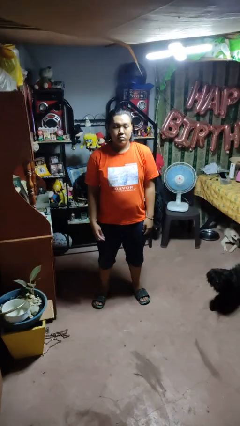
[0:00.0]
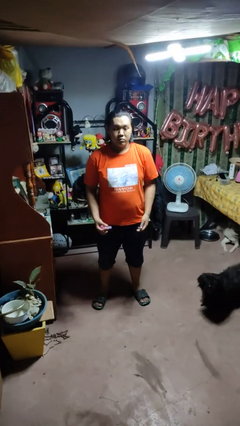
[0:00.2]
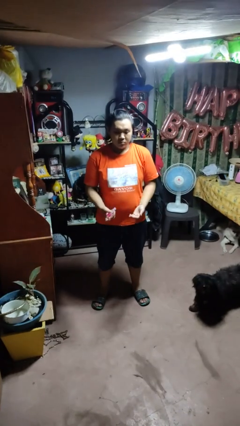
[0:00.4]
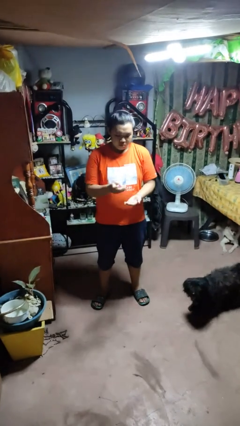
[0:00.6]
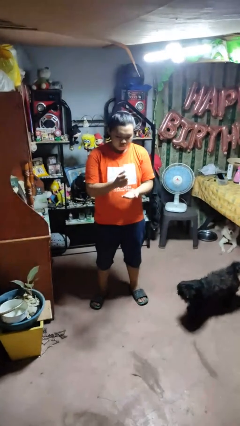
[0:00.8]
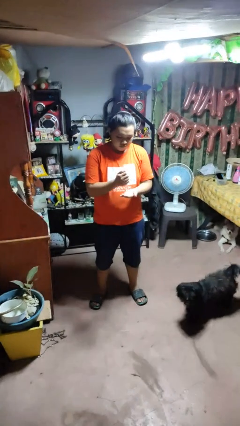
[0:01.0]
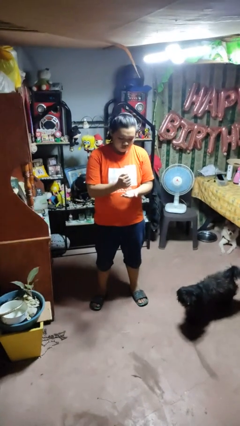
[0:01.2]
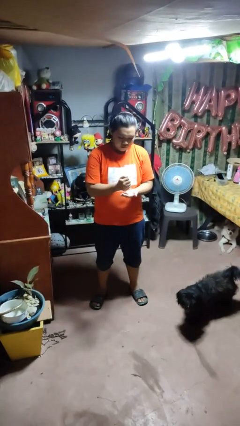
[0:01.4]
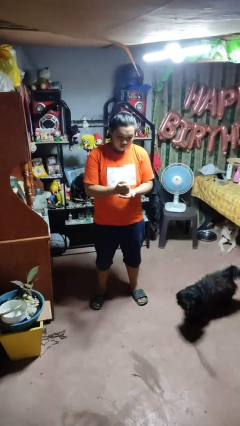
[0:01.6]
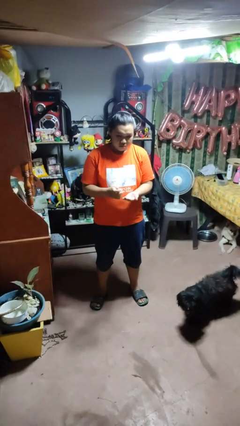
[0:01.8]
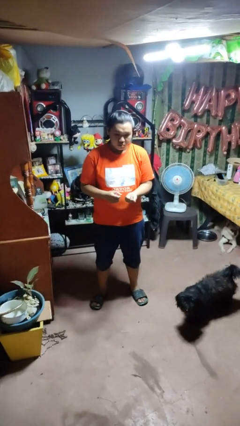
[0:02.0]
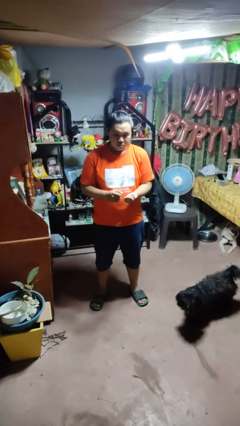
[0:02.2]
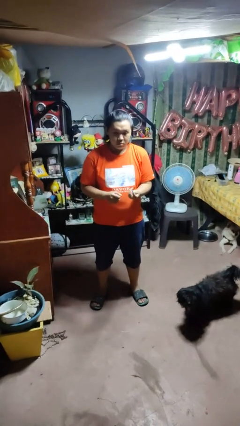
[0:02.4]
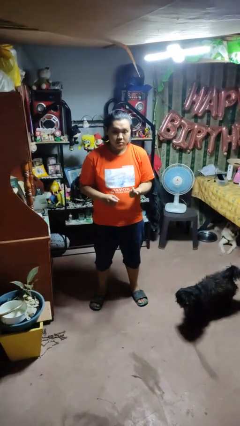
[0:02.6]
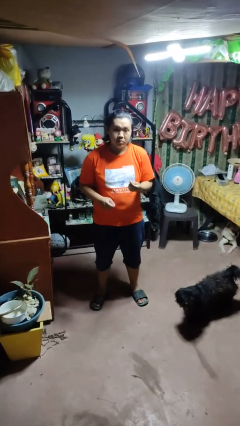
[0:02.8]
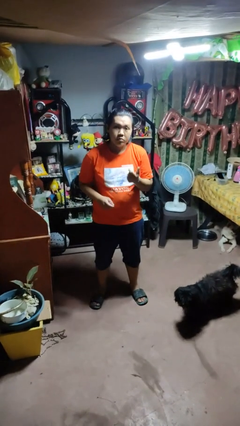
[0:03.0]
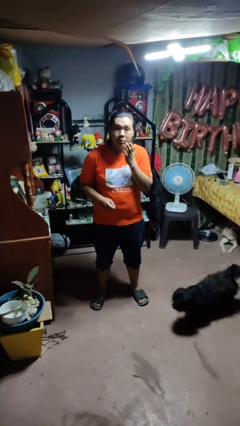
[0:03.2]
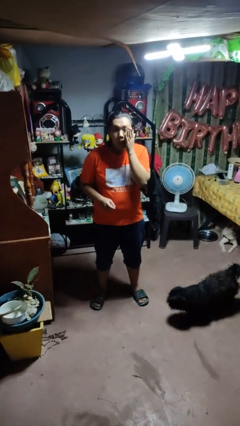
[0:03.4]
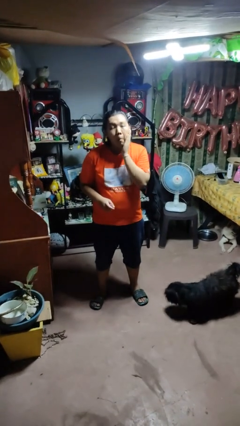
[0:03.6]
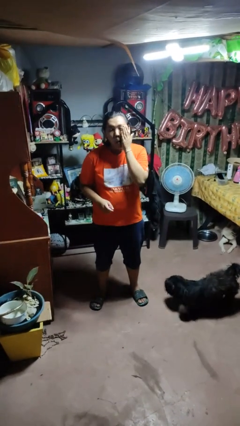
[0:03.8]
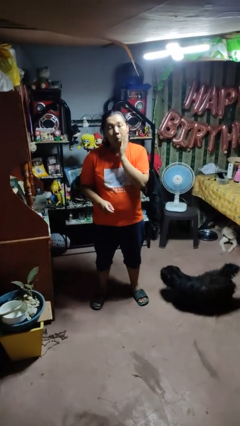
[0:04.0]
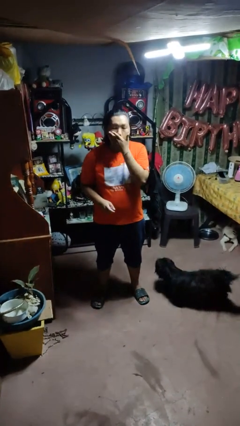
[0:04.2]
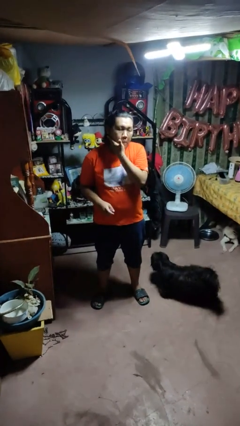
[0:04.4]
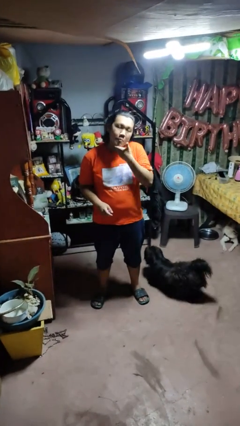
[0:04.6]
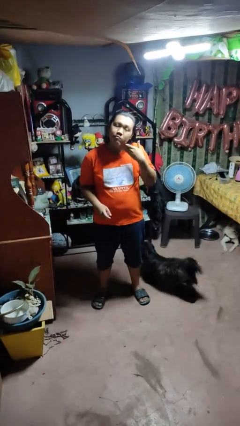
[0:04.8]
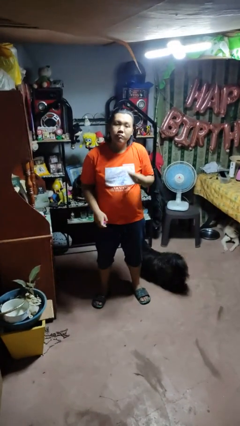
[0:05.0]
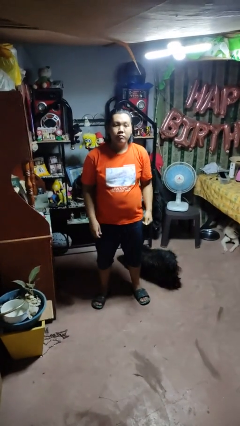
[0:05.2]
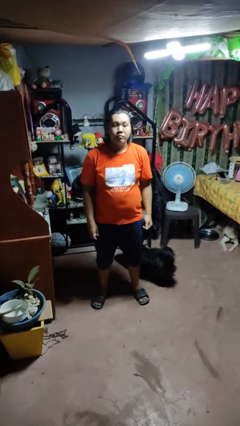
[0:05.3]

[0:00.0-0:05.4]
person applies facial moisturizer

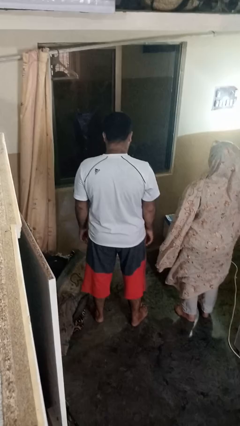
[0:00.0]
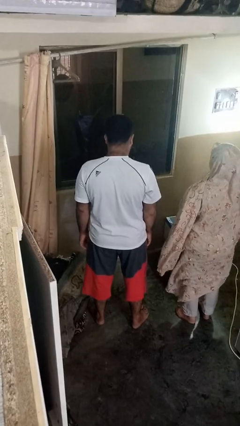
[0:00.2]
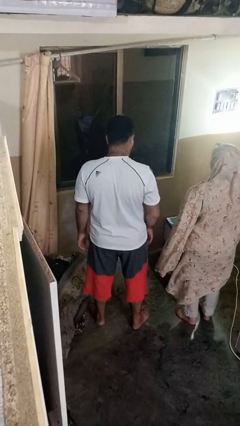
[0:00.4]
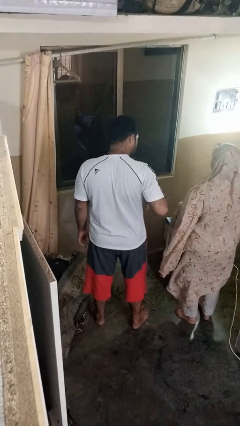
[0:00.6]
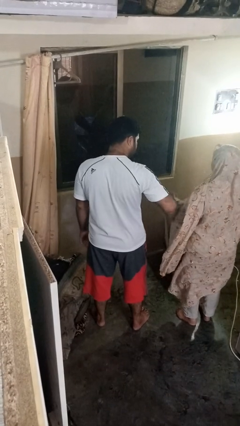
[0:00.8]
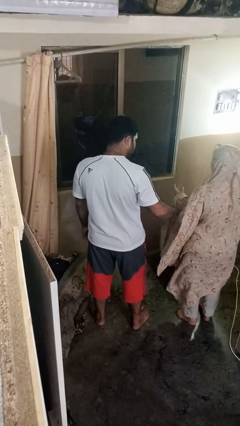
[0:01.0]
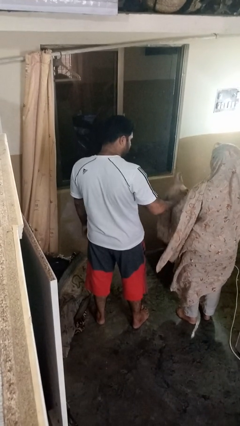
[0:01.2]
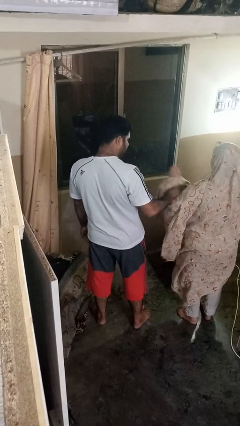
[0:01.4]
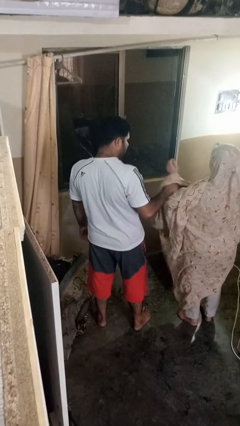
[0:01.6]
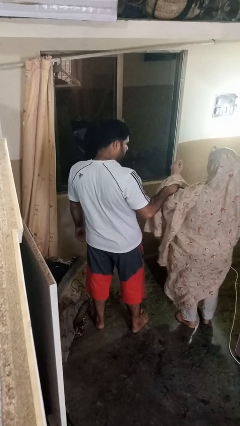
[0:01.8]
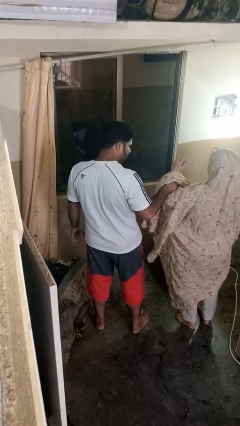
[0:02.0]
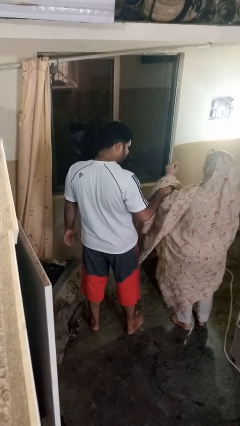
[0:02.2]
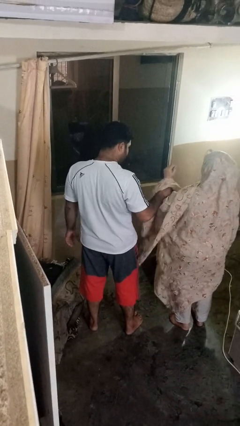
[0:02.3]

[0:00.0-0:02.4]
person grabs person by forearm

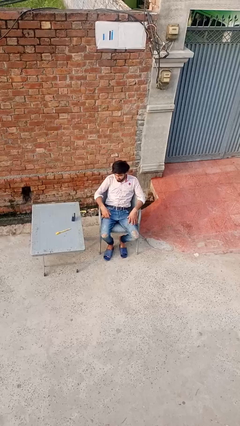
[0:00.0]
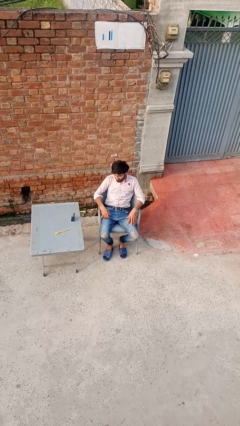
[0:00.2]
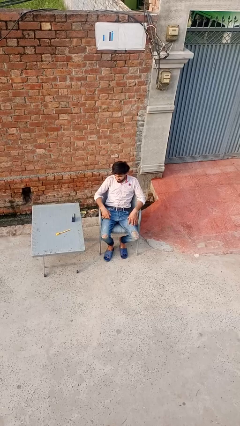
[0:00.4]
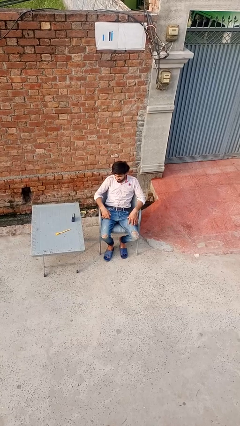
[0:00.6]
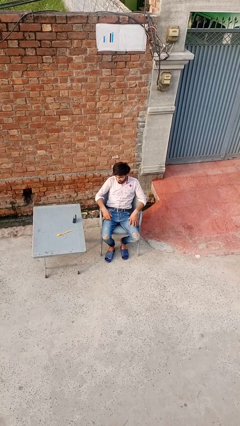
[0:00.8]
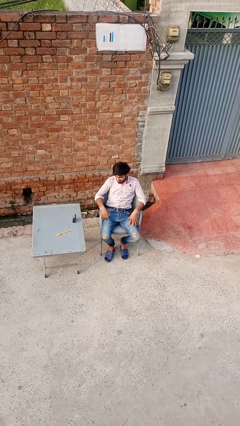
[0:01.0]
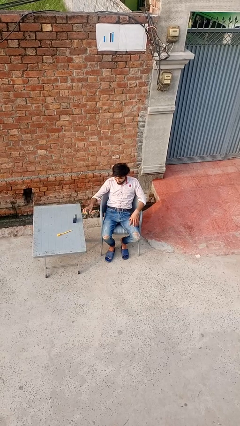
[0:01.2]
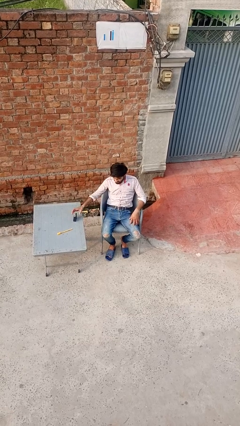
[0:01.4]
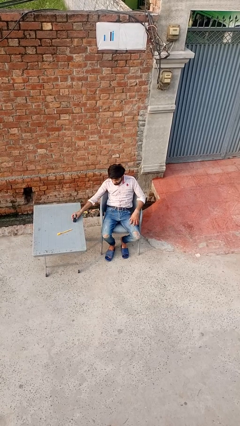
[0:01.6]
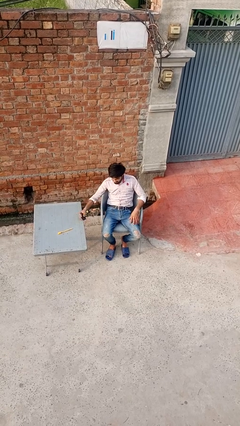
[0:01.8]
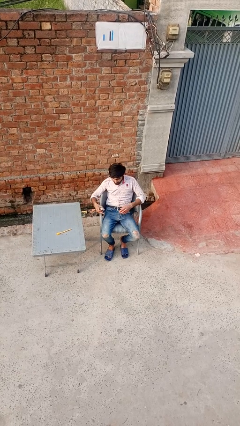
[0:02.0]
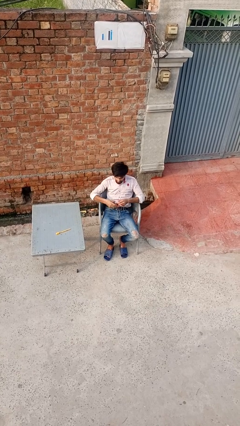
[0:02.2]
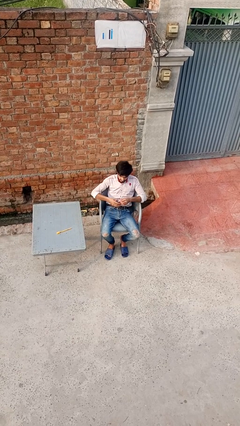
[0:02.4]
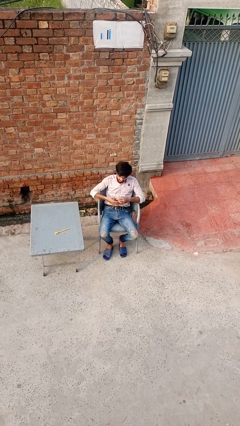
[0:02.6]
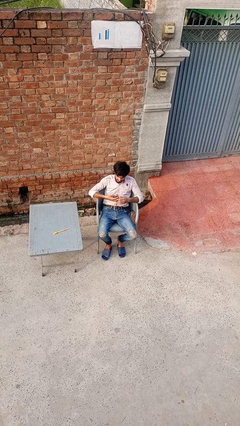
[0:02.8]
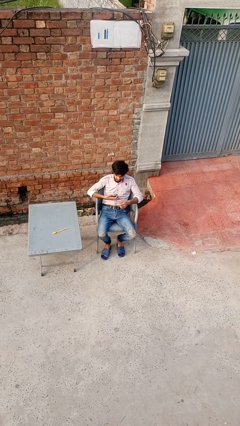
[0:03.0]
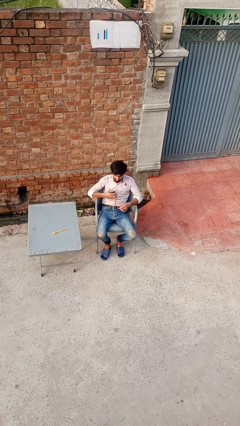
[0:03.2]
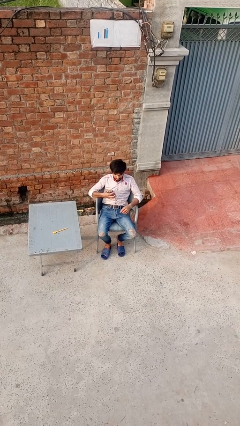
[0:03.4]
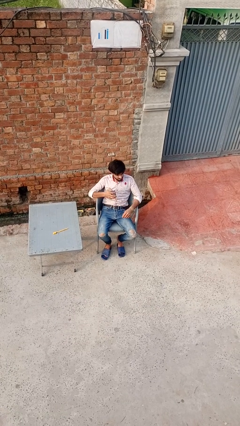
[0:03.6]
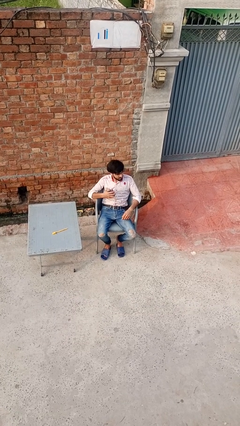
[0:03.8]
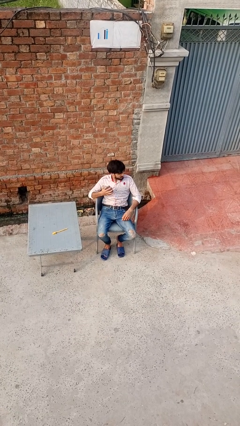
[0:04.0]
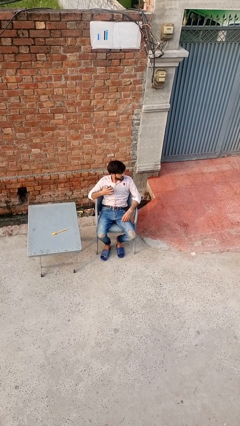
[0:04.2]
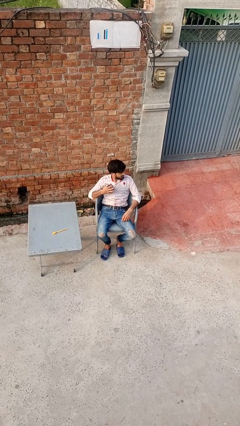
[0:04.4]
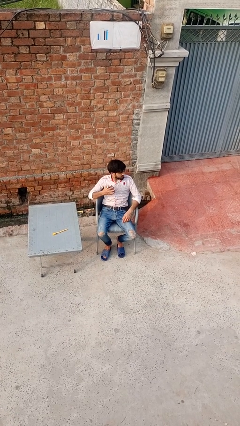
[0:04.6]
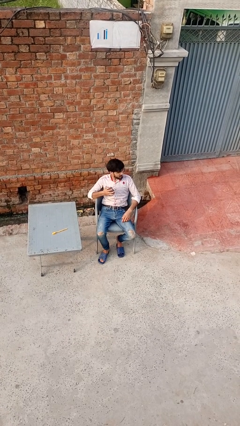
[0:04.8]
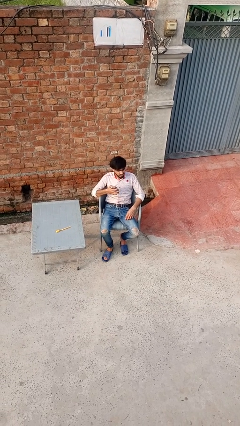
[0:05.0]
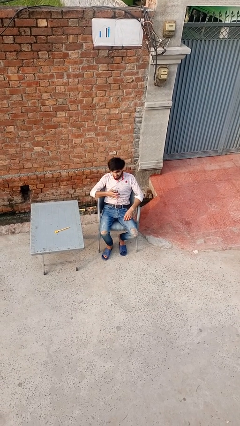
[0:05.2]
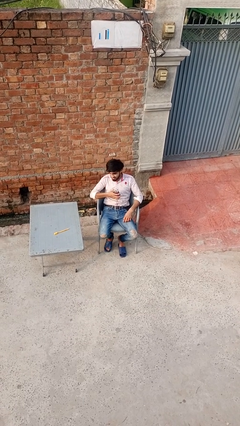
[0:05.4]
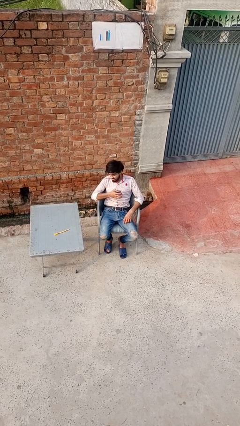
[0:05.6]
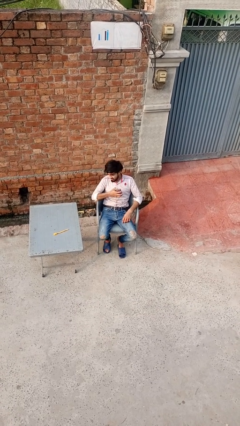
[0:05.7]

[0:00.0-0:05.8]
person applies deodorant

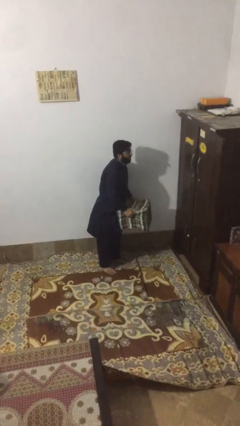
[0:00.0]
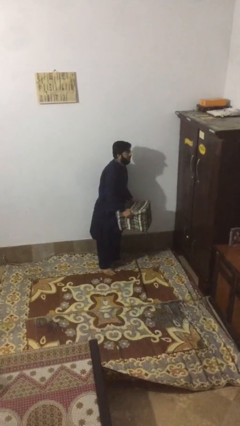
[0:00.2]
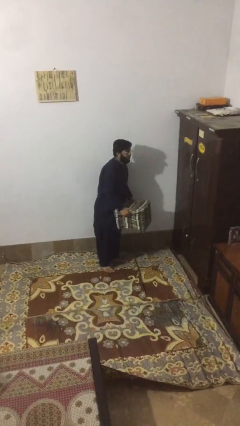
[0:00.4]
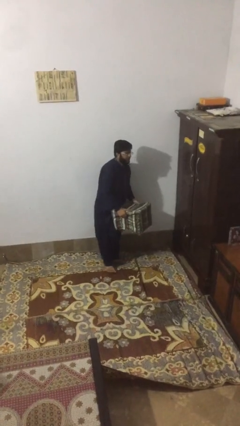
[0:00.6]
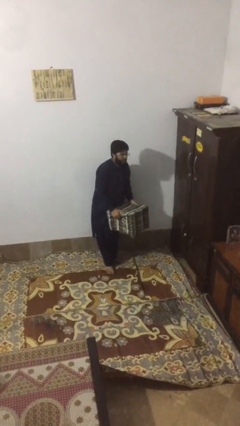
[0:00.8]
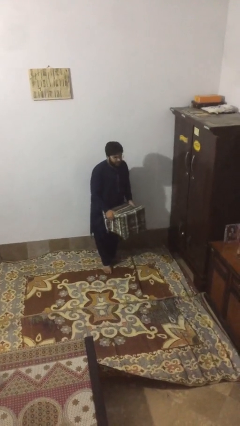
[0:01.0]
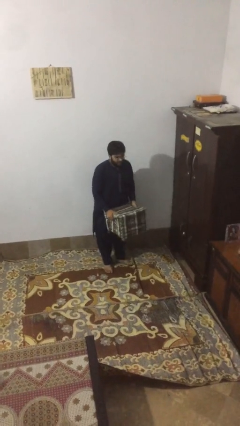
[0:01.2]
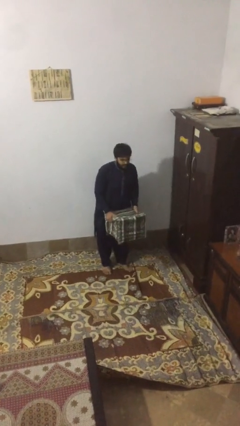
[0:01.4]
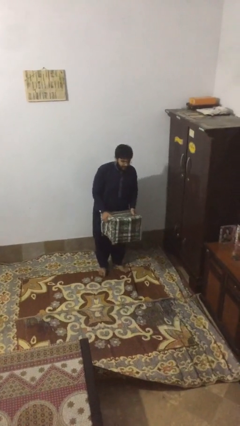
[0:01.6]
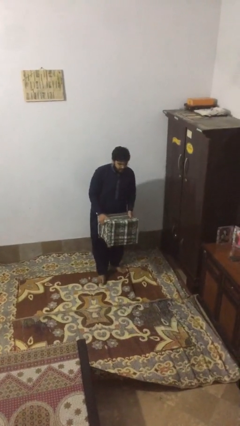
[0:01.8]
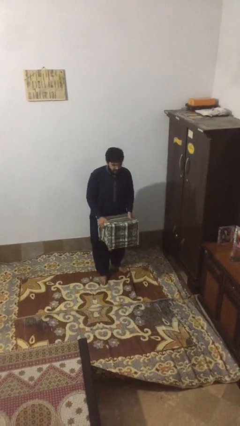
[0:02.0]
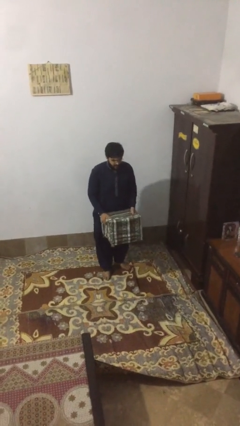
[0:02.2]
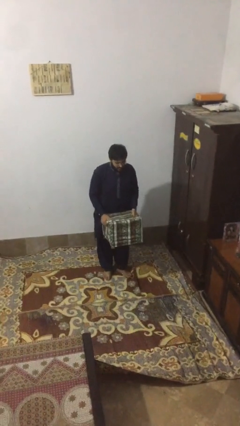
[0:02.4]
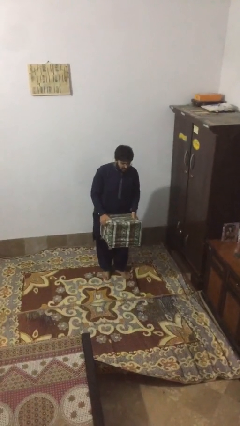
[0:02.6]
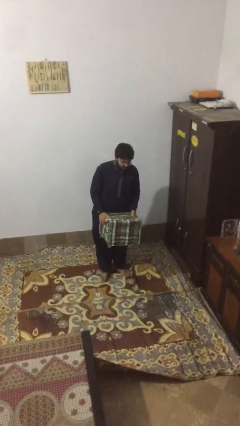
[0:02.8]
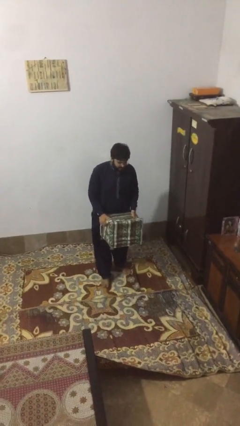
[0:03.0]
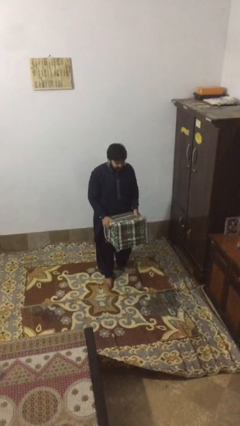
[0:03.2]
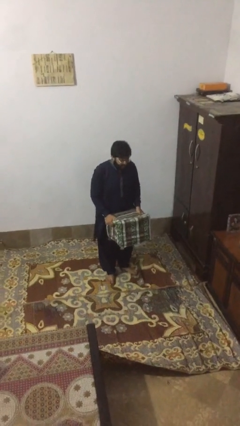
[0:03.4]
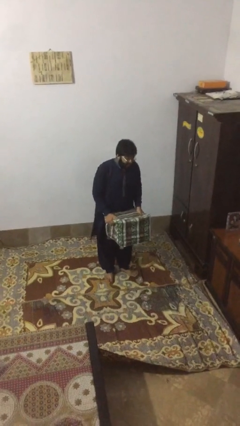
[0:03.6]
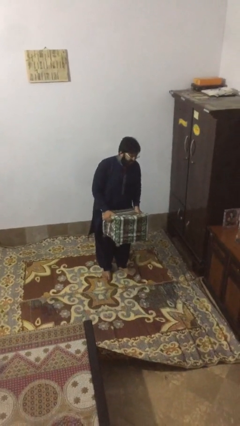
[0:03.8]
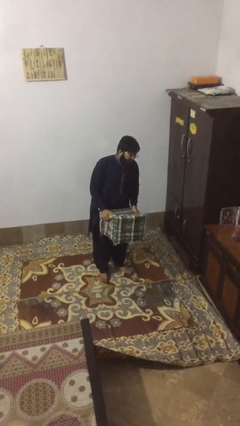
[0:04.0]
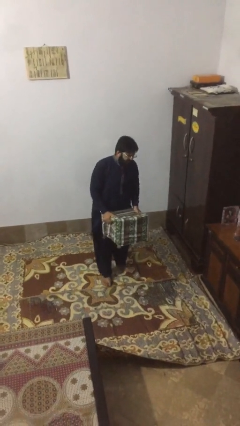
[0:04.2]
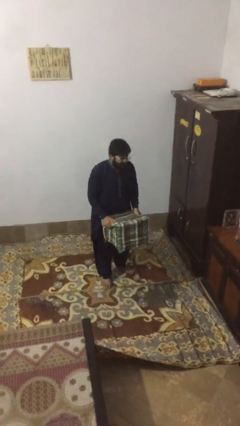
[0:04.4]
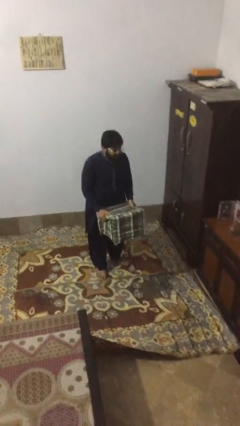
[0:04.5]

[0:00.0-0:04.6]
person carries heavy object

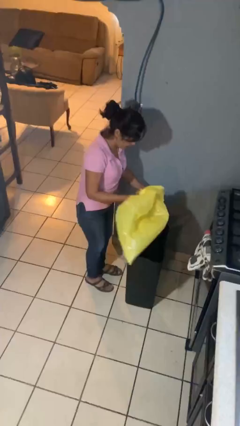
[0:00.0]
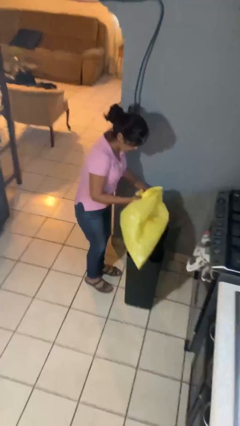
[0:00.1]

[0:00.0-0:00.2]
person removes trashbag from trashcan
